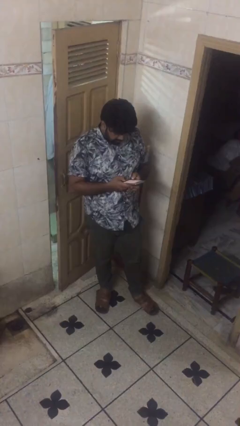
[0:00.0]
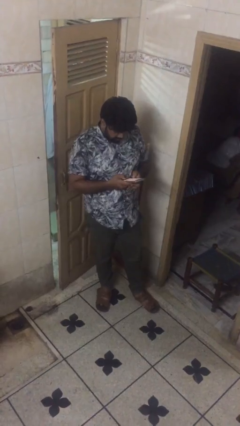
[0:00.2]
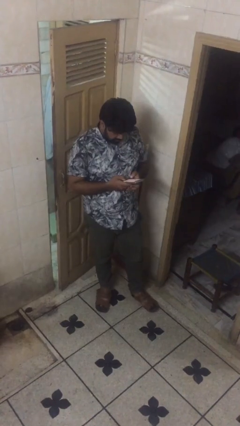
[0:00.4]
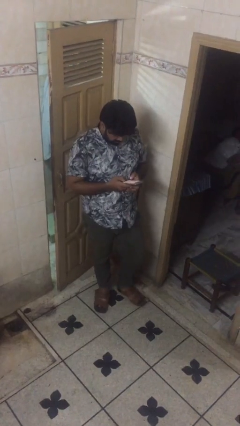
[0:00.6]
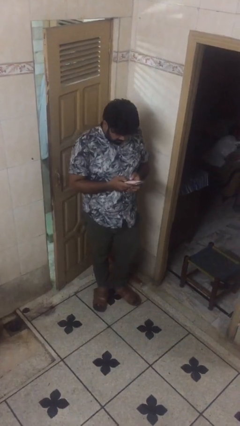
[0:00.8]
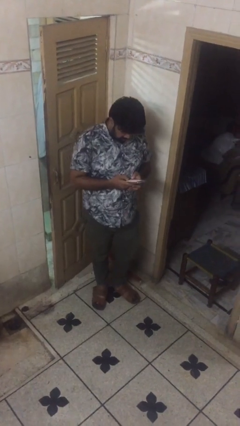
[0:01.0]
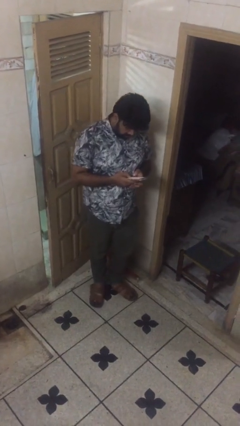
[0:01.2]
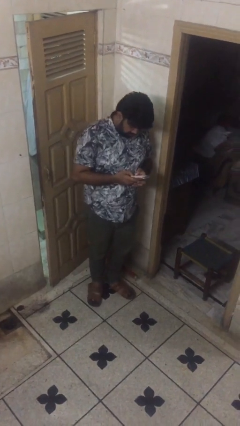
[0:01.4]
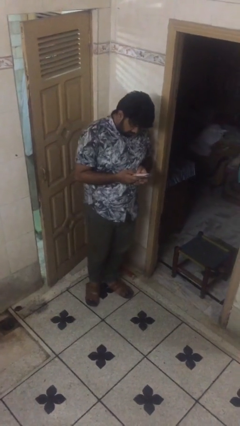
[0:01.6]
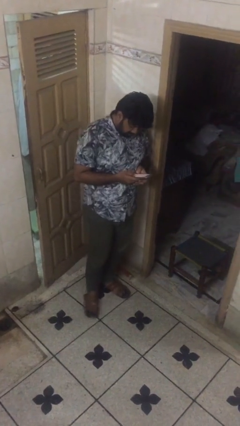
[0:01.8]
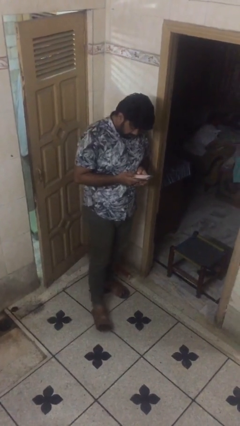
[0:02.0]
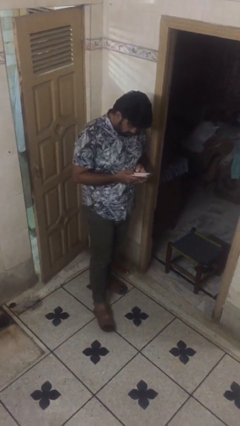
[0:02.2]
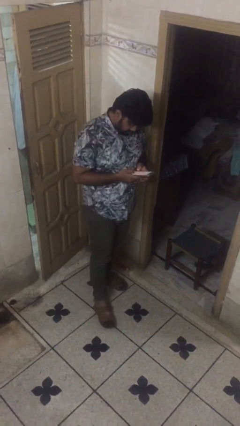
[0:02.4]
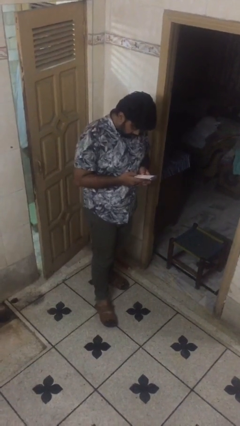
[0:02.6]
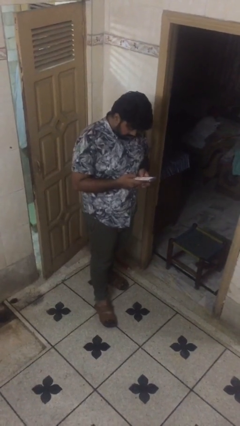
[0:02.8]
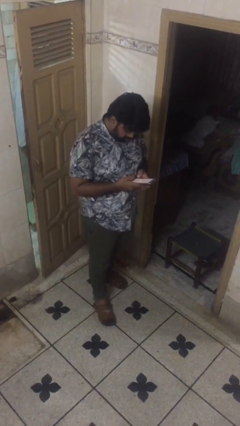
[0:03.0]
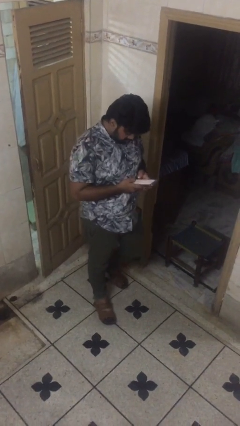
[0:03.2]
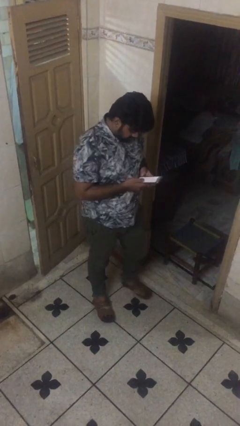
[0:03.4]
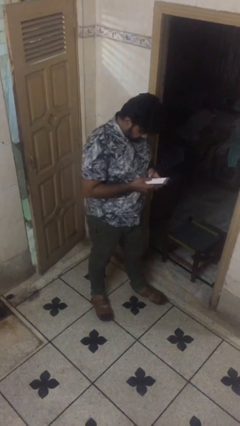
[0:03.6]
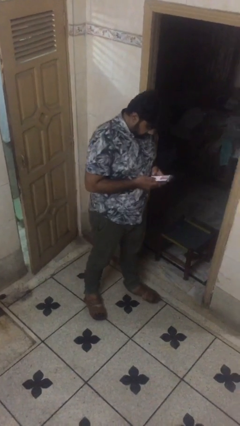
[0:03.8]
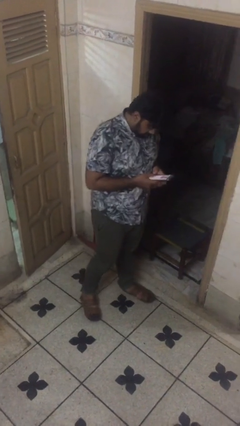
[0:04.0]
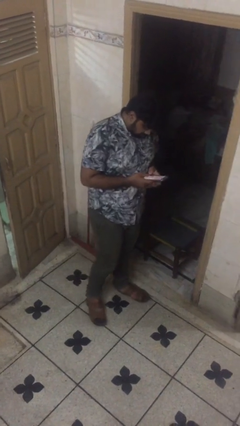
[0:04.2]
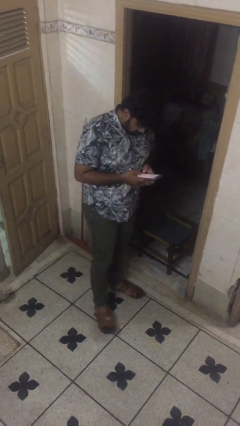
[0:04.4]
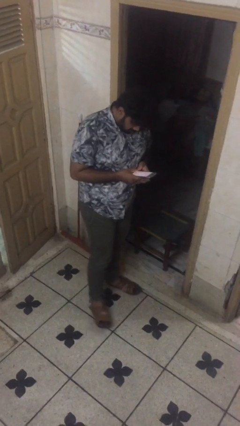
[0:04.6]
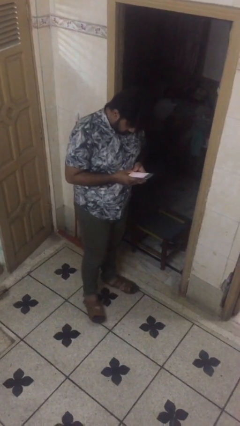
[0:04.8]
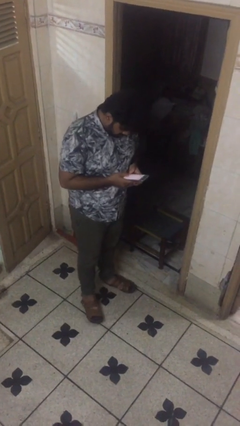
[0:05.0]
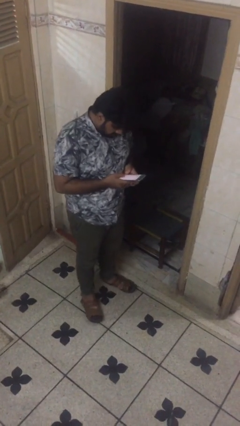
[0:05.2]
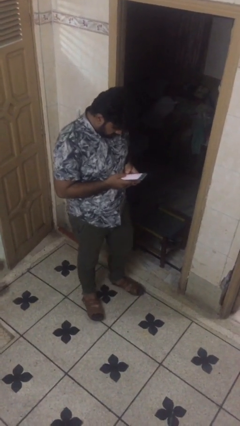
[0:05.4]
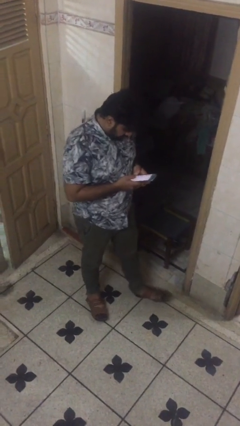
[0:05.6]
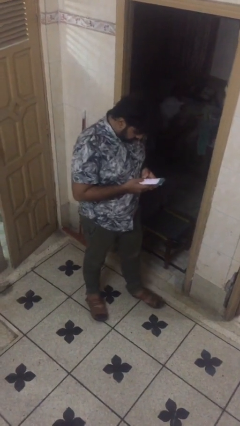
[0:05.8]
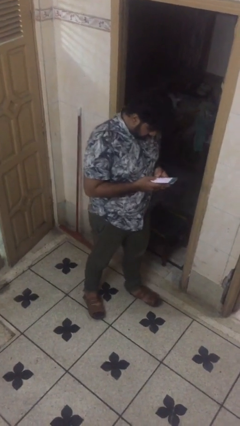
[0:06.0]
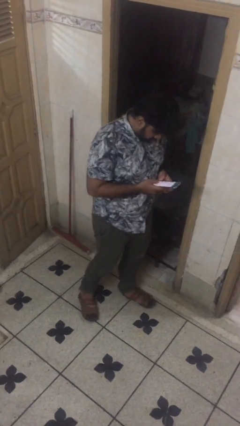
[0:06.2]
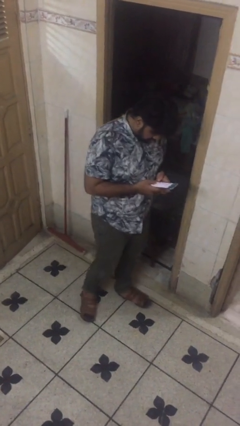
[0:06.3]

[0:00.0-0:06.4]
person texts on phone

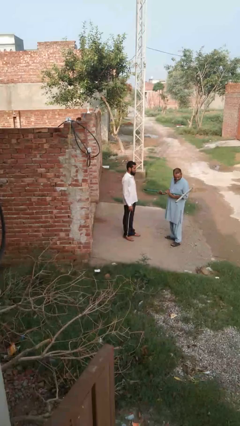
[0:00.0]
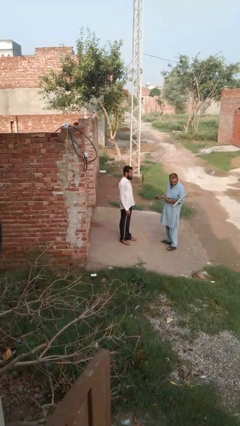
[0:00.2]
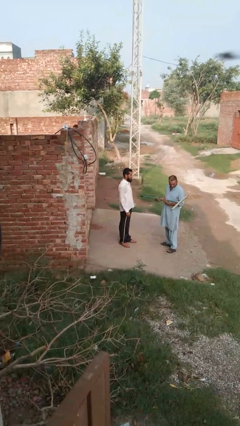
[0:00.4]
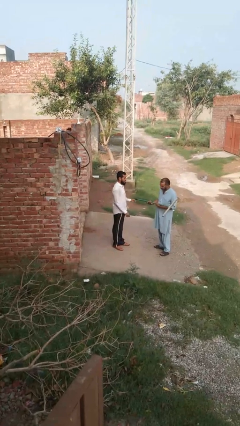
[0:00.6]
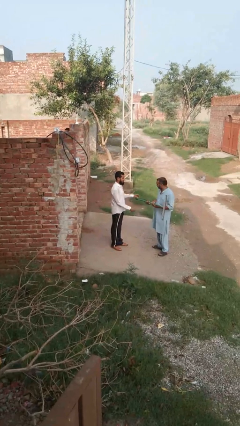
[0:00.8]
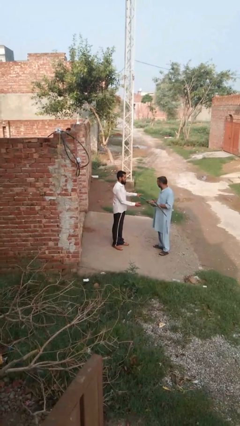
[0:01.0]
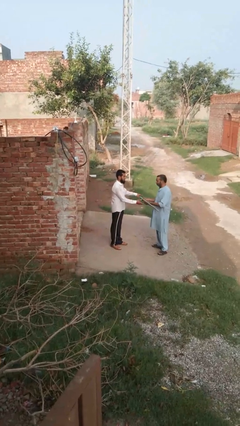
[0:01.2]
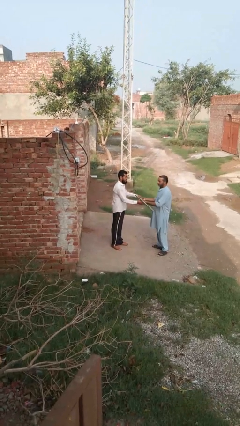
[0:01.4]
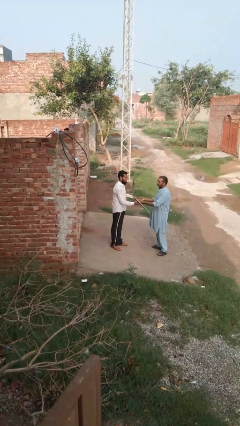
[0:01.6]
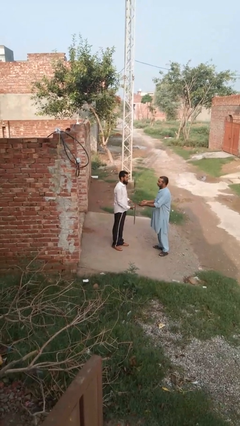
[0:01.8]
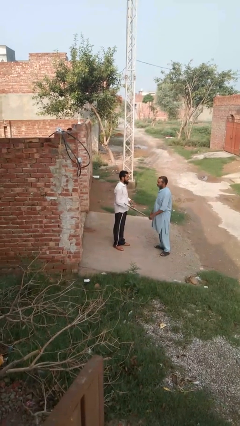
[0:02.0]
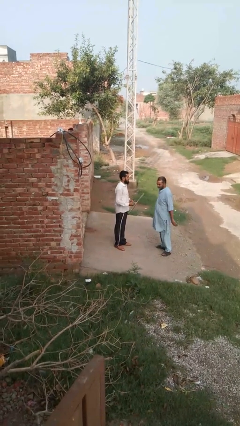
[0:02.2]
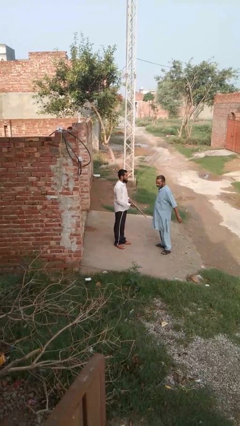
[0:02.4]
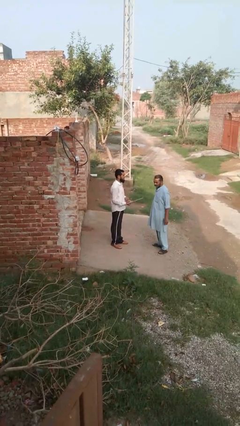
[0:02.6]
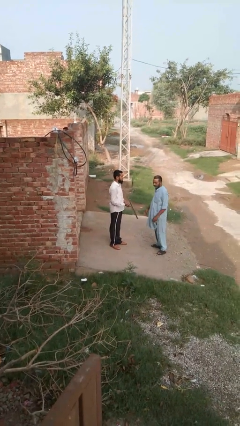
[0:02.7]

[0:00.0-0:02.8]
person transfers object to person

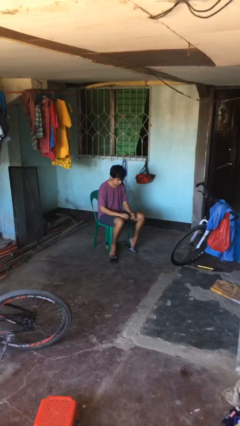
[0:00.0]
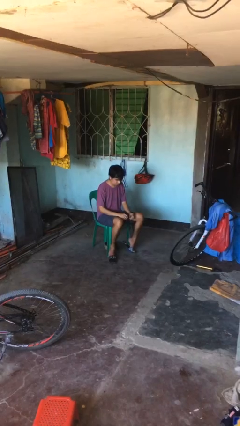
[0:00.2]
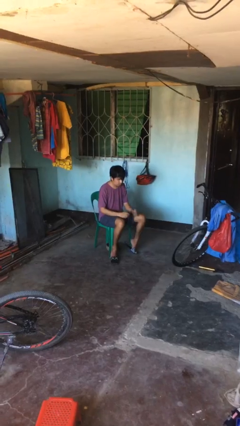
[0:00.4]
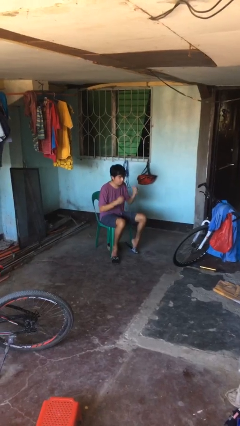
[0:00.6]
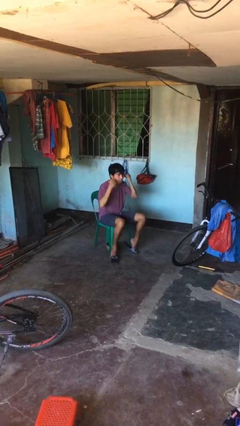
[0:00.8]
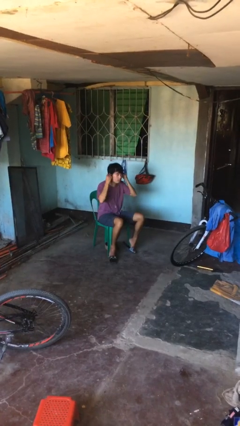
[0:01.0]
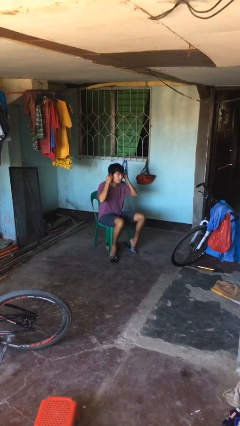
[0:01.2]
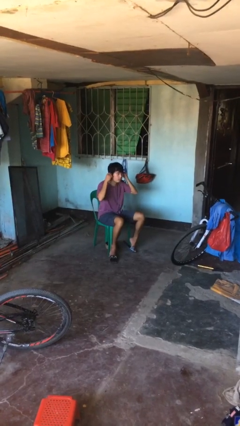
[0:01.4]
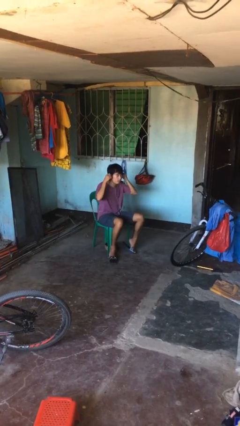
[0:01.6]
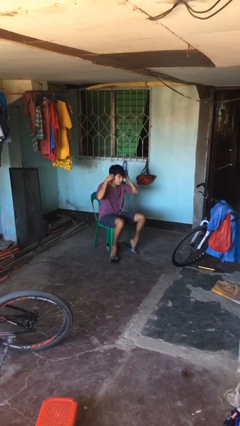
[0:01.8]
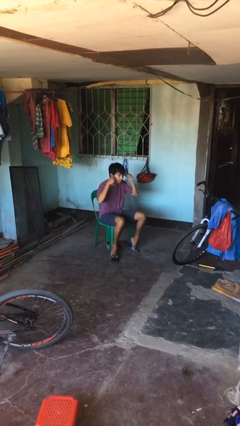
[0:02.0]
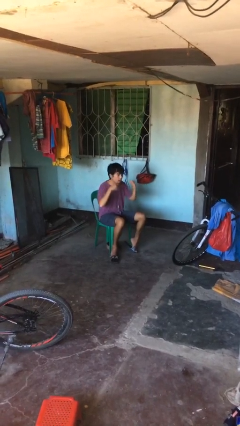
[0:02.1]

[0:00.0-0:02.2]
person puts on headphones

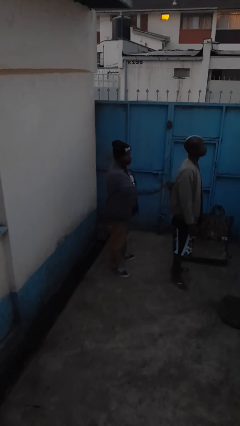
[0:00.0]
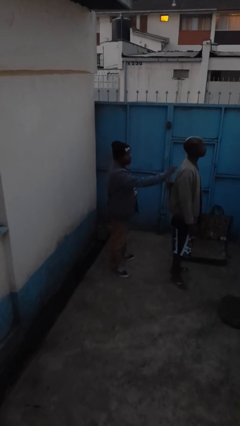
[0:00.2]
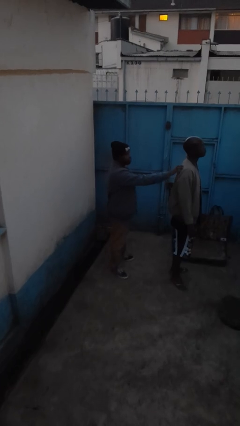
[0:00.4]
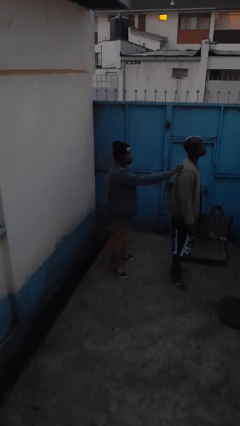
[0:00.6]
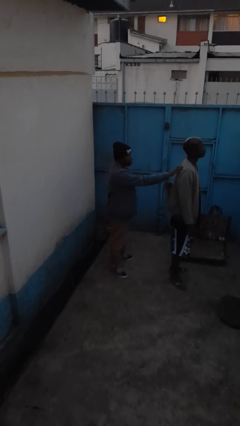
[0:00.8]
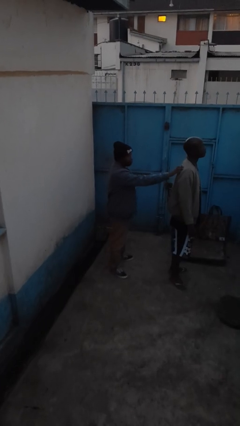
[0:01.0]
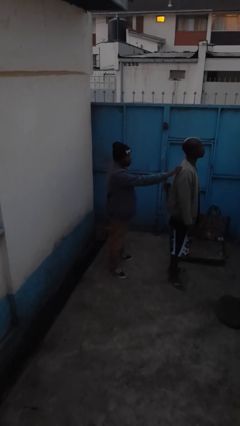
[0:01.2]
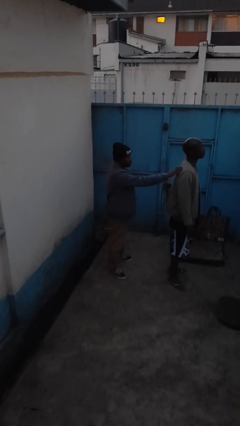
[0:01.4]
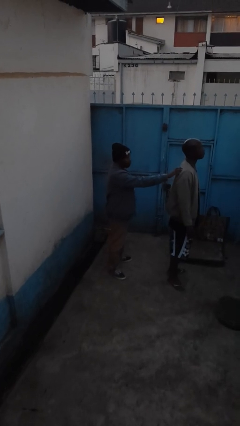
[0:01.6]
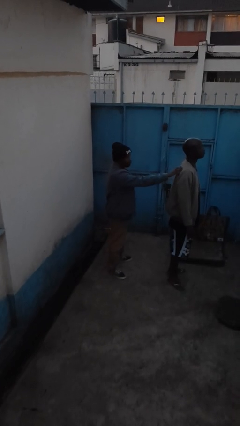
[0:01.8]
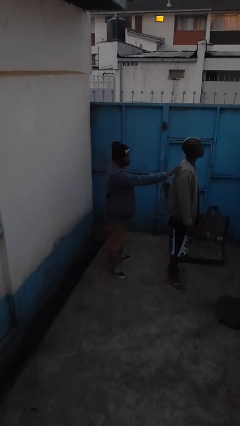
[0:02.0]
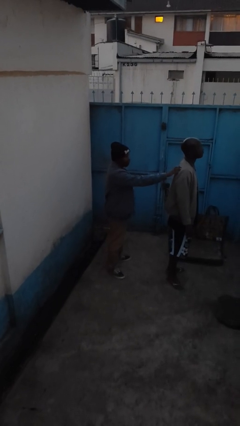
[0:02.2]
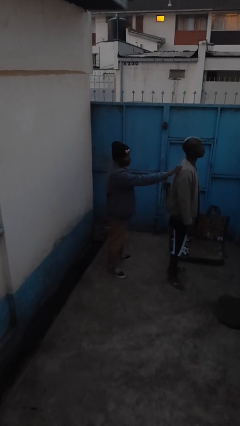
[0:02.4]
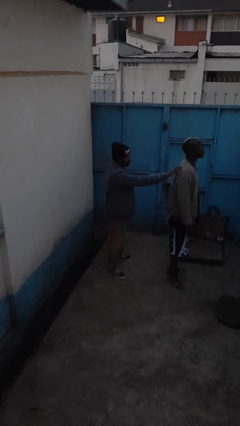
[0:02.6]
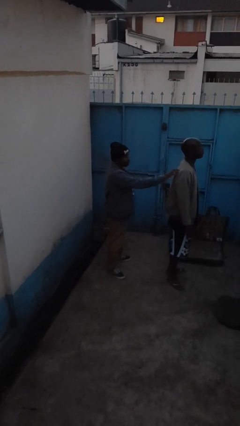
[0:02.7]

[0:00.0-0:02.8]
person touches back of person

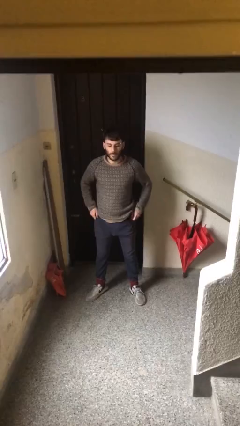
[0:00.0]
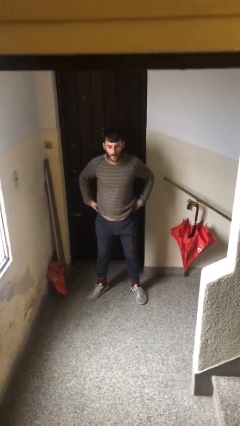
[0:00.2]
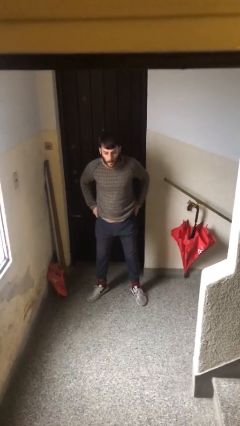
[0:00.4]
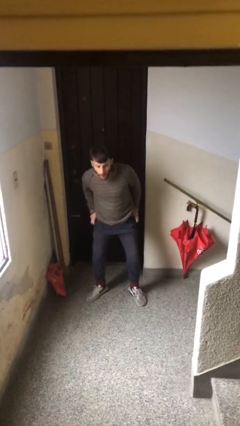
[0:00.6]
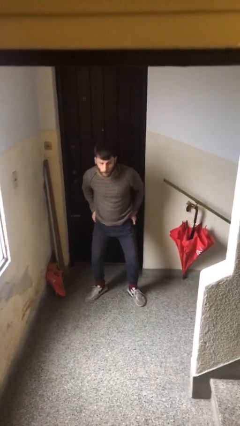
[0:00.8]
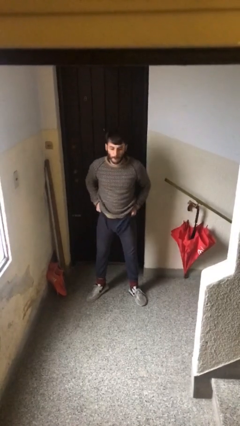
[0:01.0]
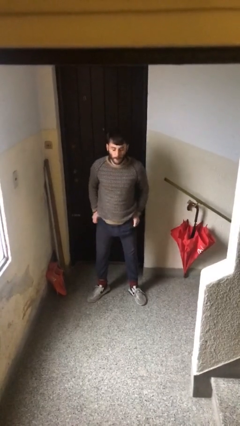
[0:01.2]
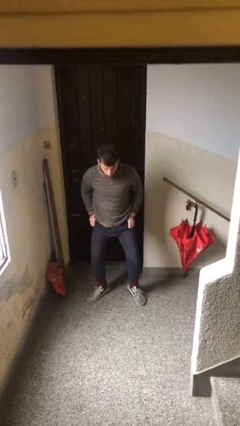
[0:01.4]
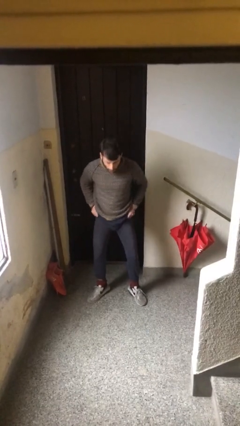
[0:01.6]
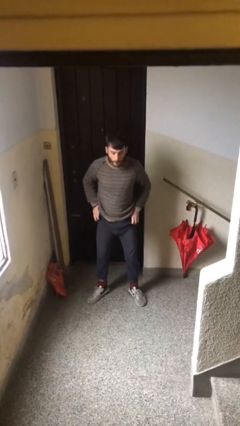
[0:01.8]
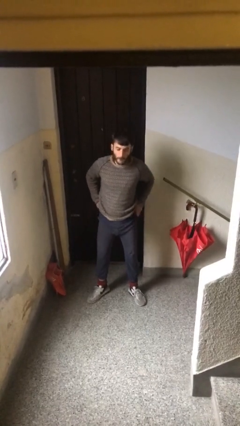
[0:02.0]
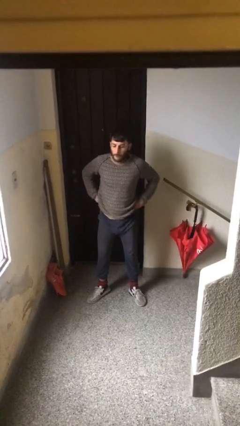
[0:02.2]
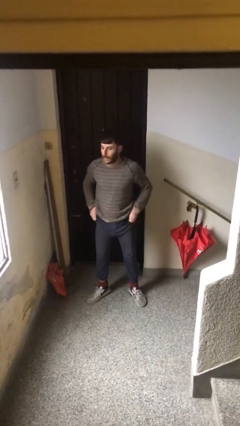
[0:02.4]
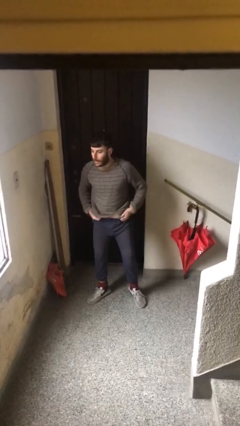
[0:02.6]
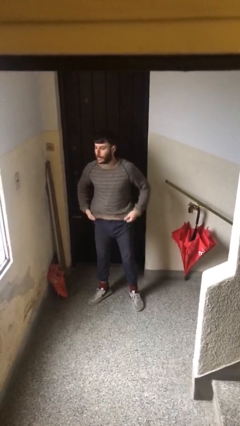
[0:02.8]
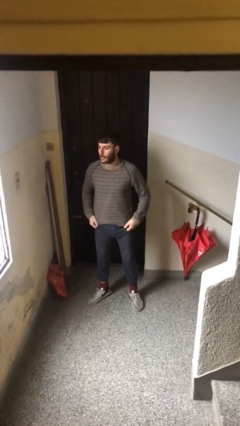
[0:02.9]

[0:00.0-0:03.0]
person hikes up pants

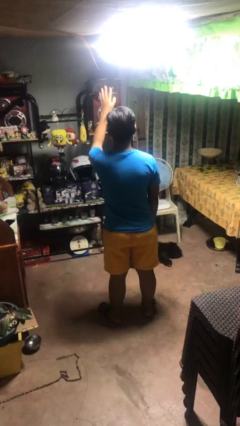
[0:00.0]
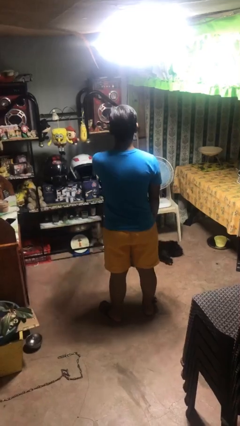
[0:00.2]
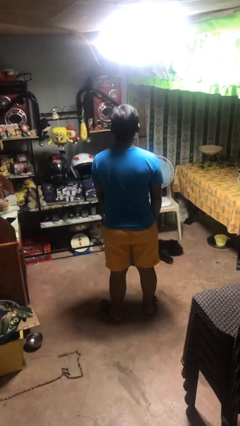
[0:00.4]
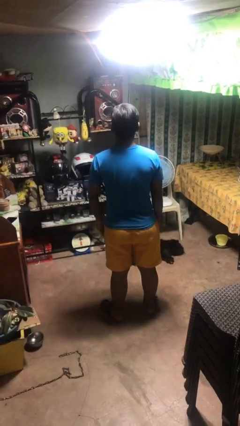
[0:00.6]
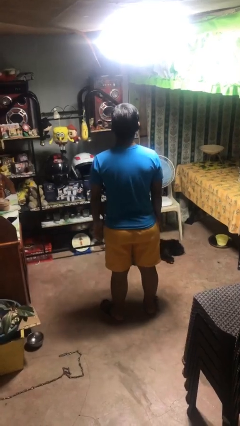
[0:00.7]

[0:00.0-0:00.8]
person gestures swipe down
